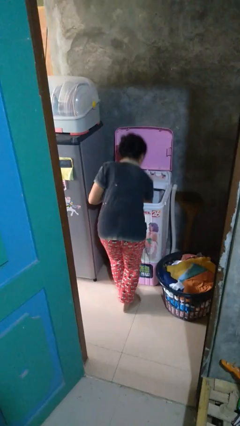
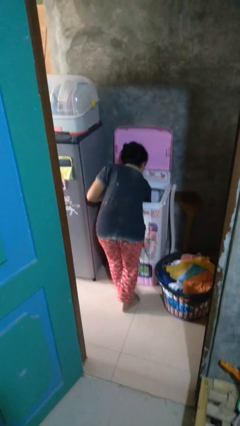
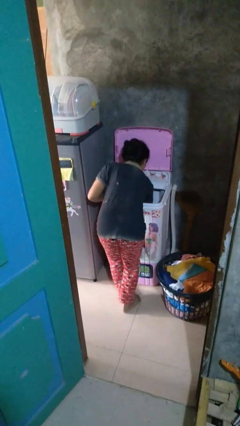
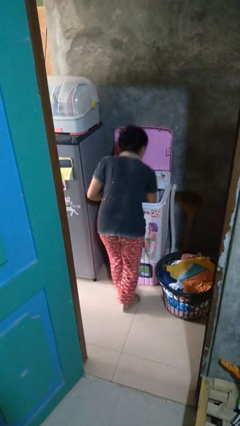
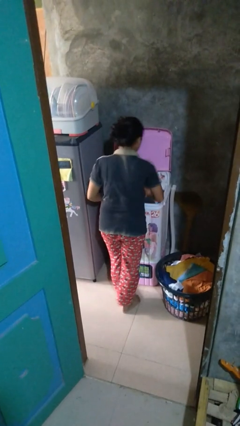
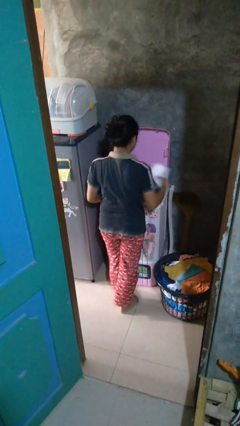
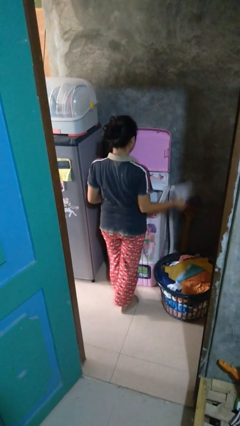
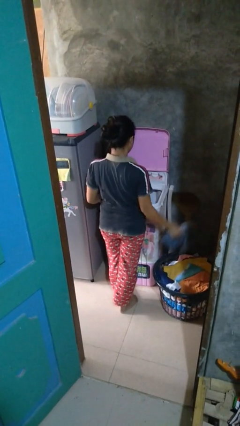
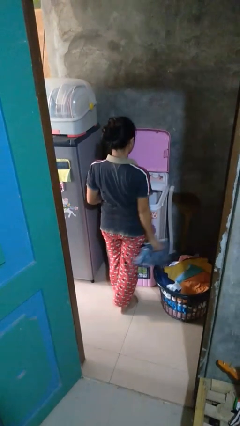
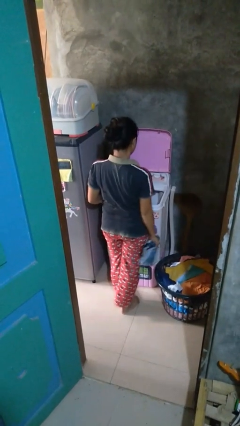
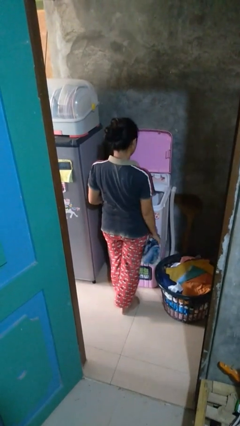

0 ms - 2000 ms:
person unloads clotheswasher

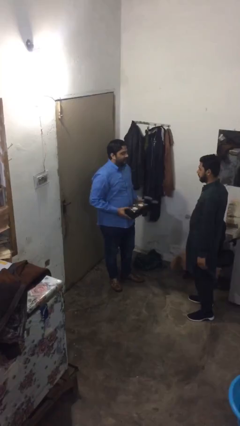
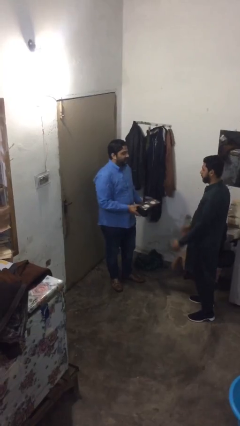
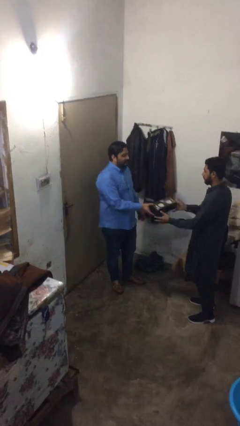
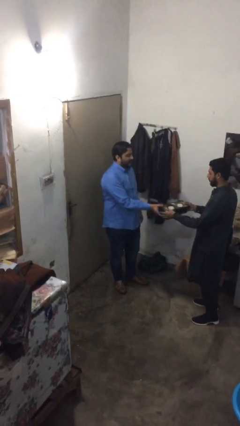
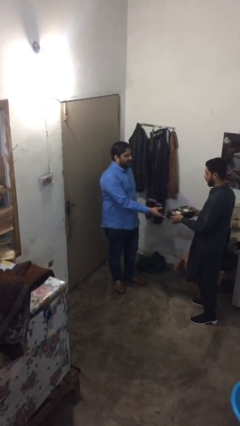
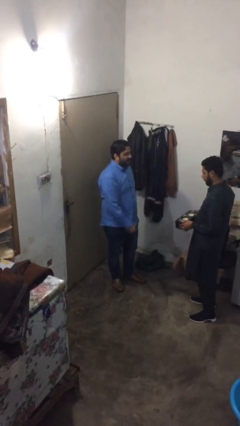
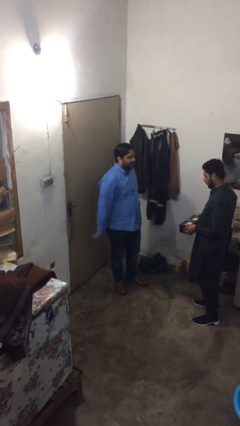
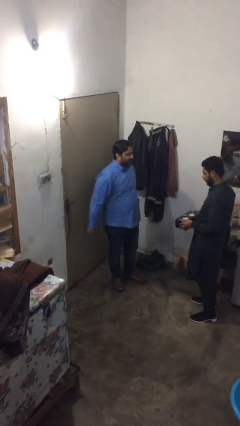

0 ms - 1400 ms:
person transfers object to person

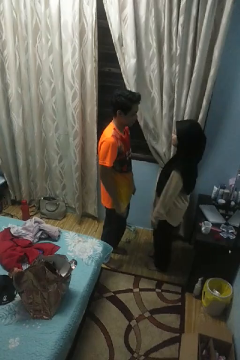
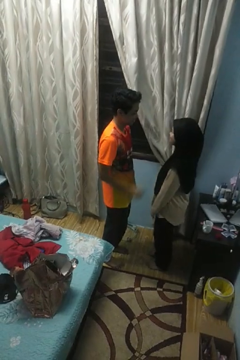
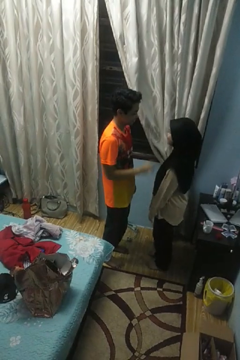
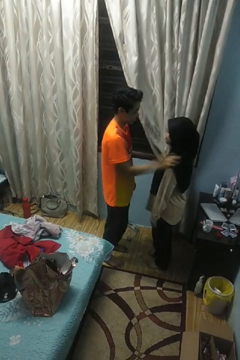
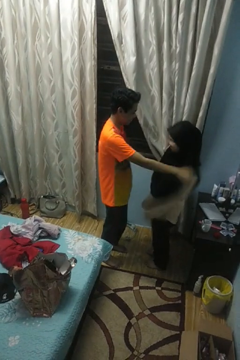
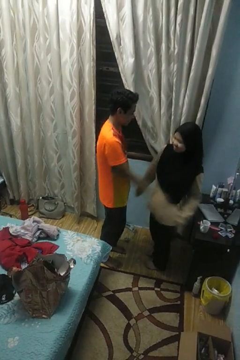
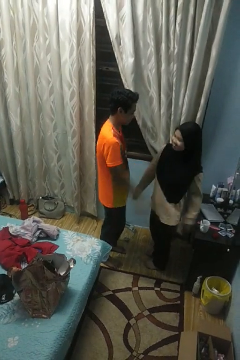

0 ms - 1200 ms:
person shoves person

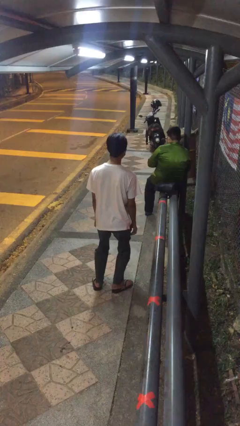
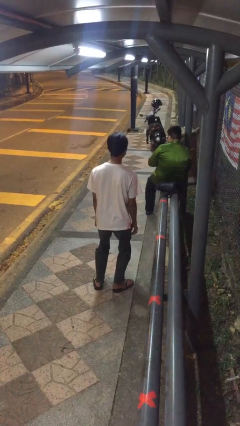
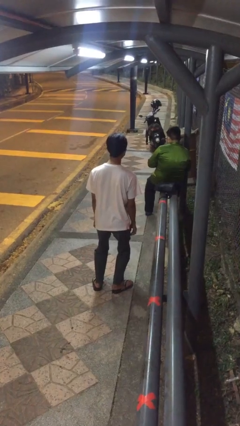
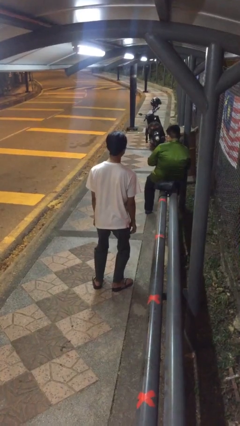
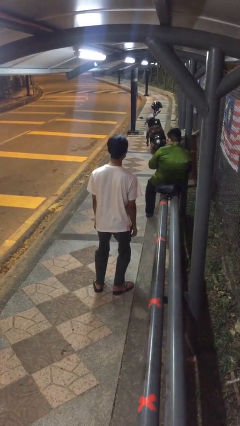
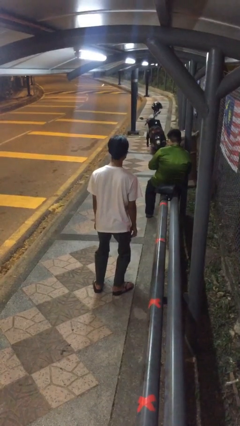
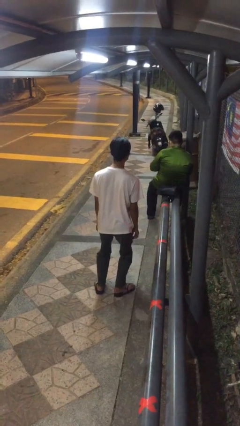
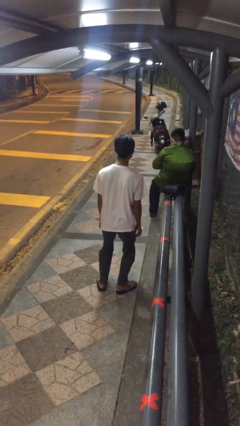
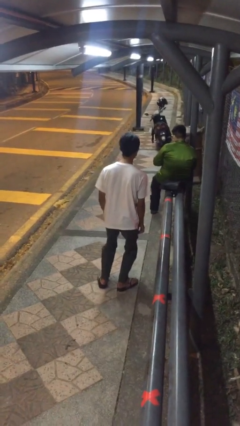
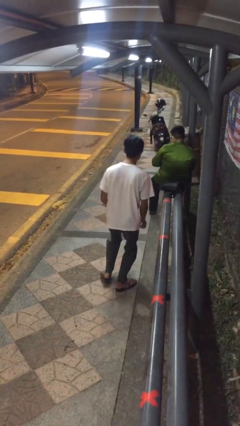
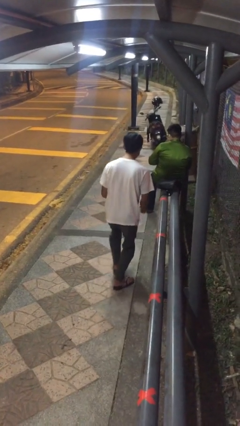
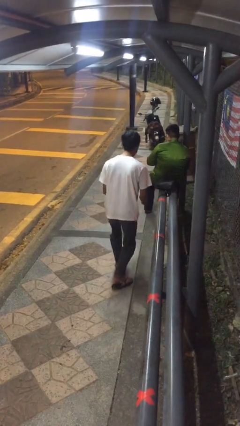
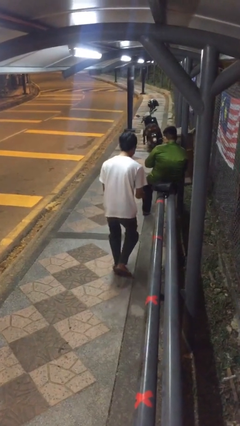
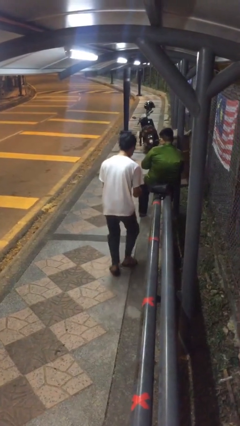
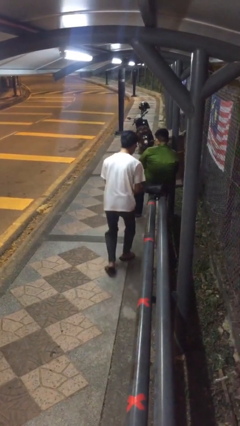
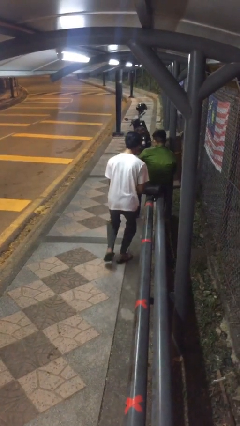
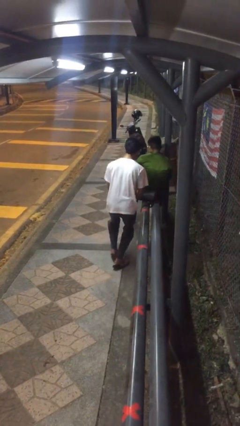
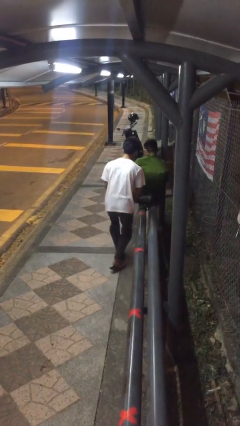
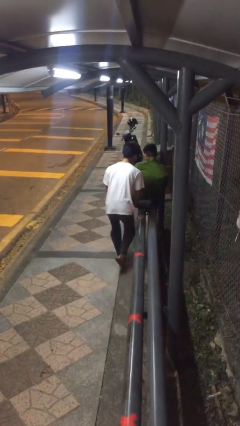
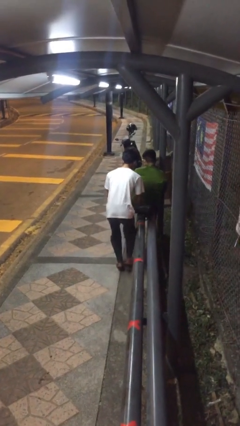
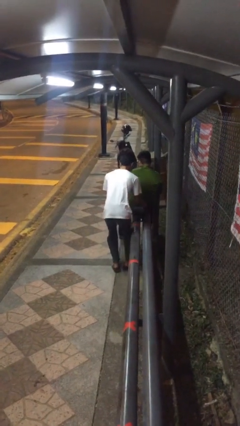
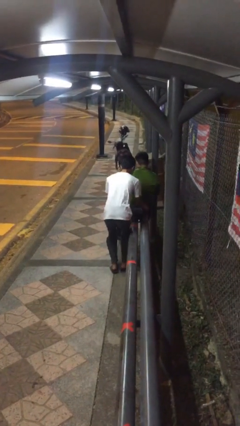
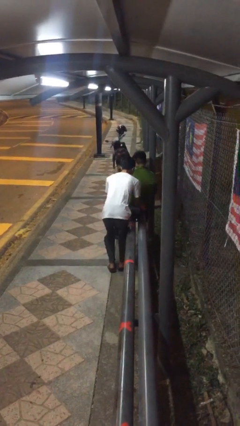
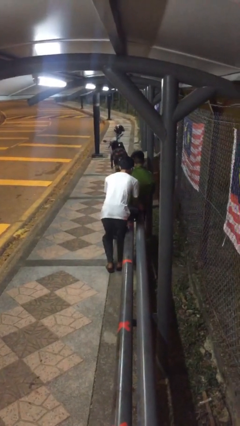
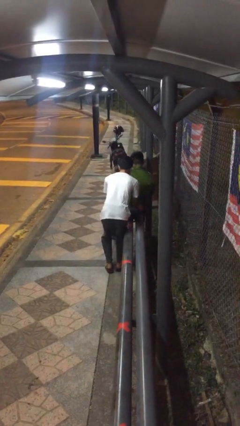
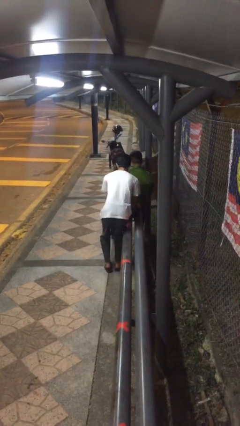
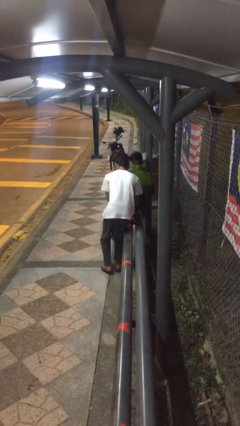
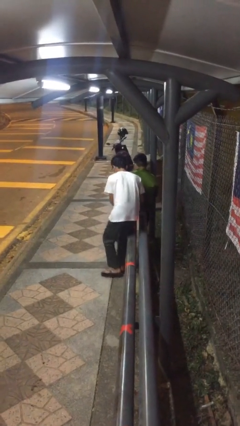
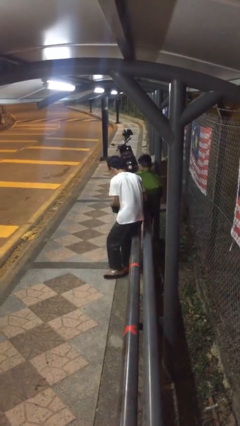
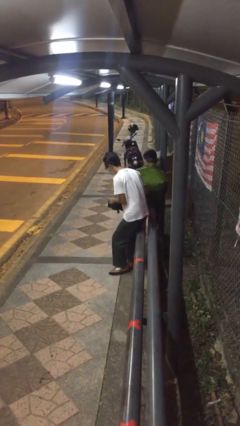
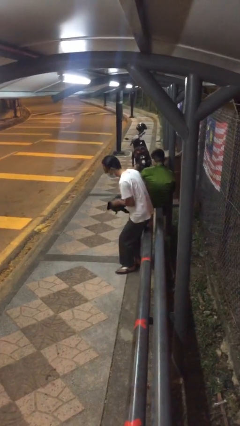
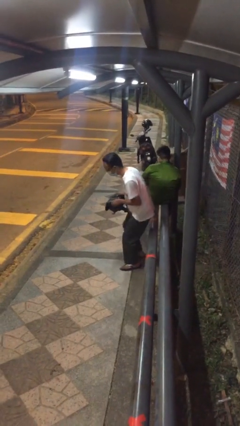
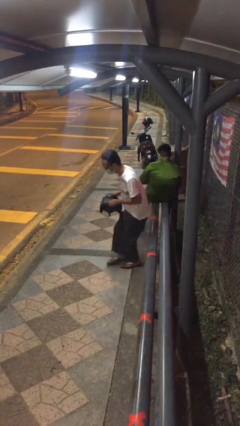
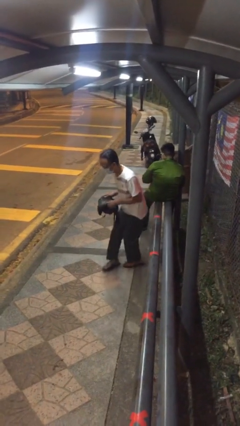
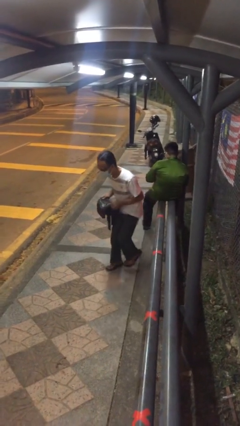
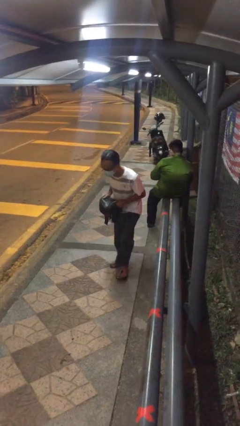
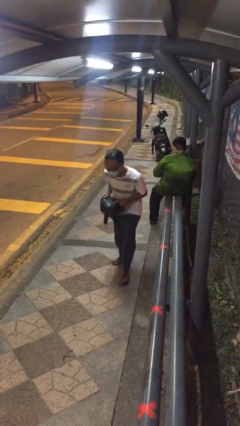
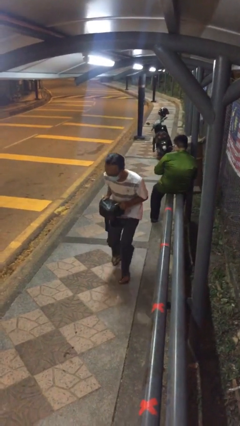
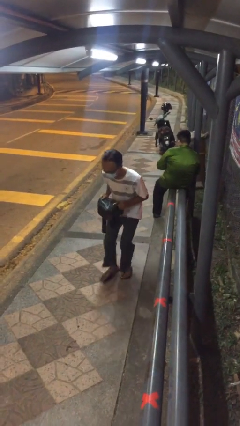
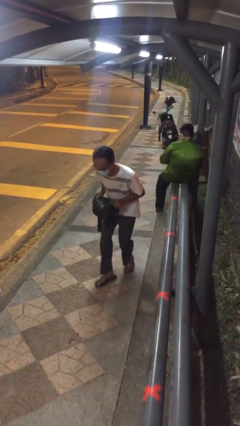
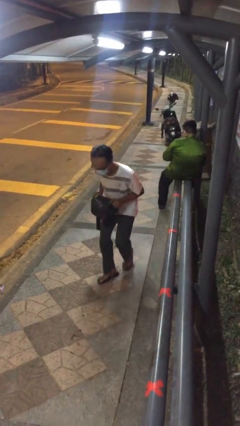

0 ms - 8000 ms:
person steals object from person

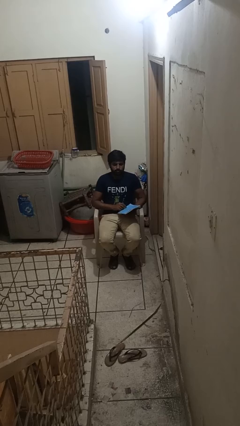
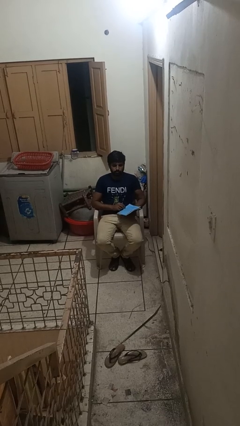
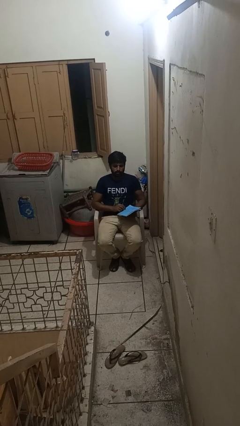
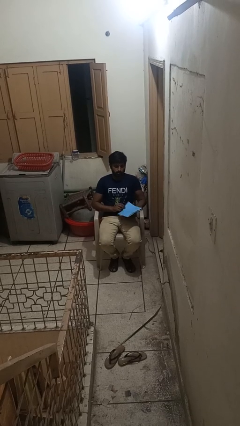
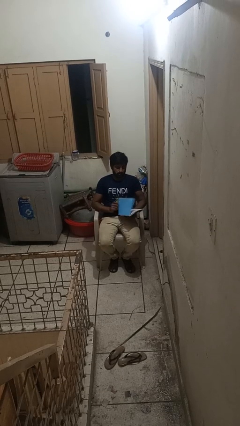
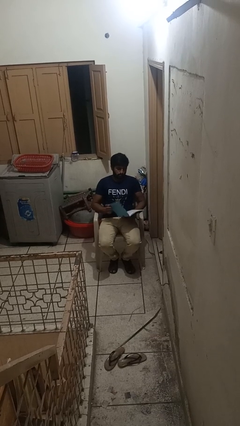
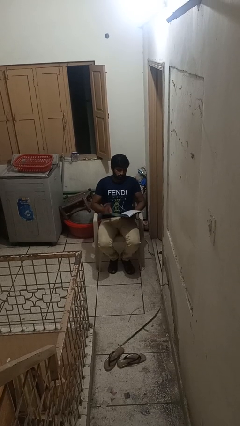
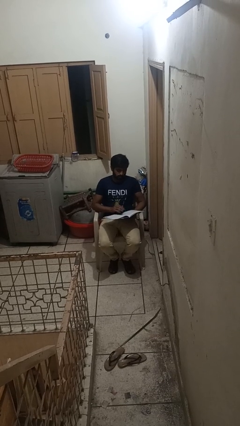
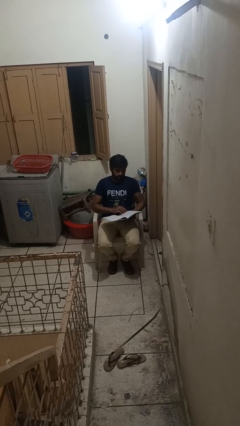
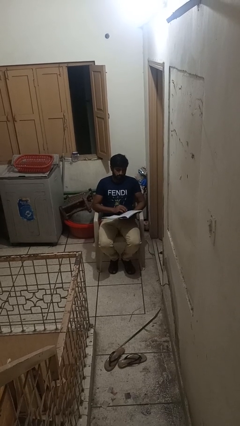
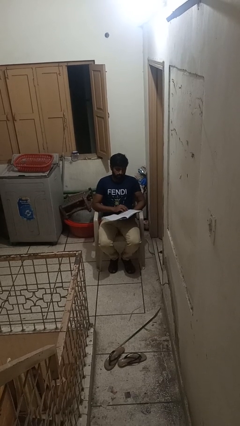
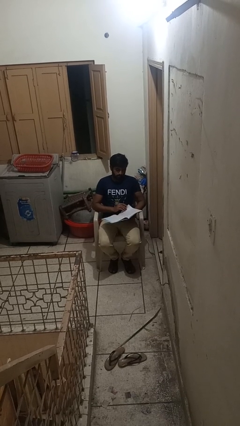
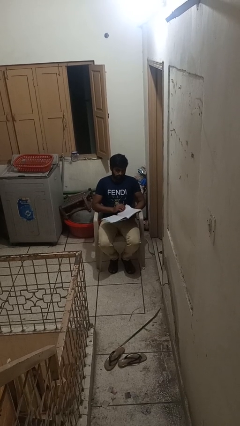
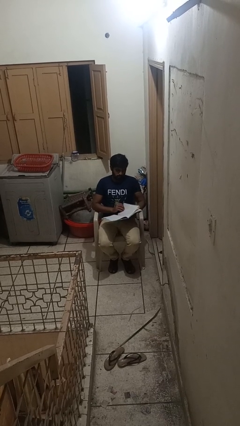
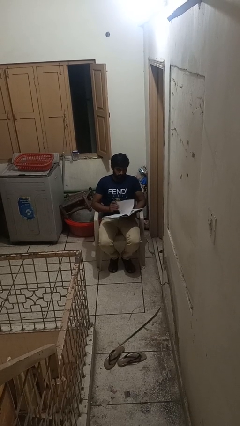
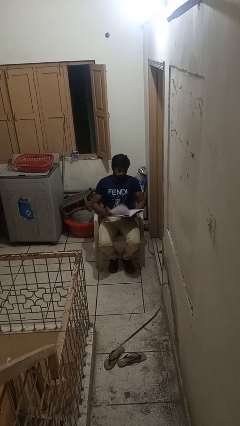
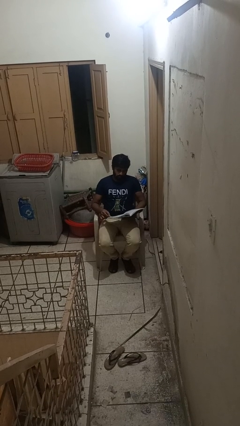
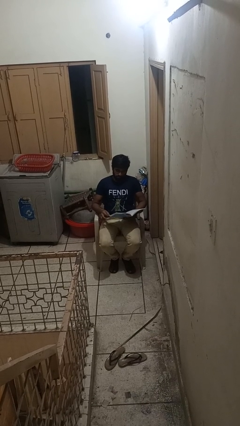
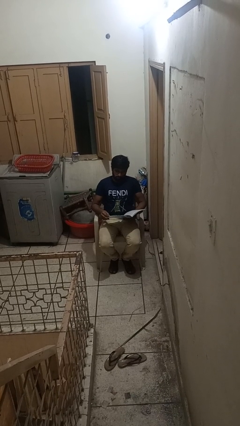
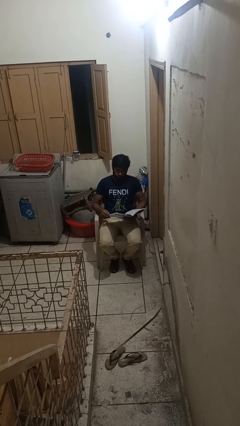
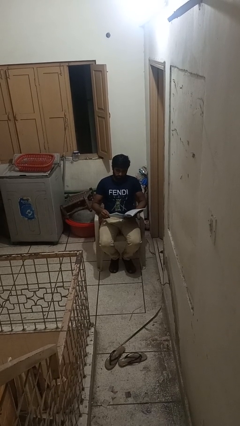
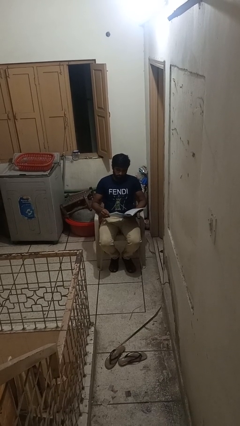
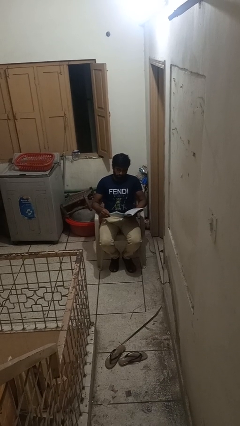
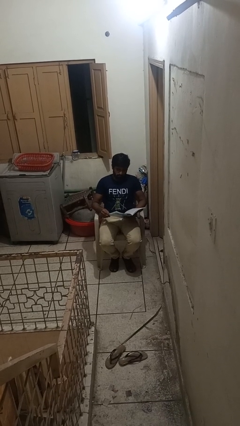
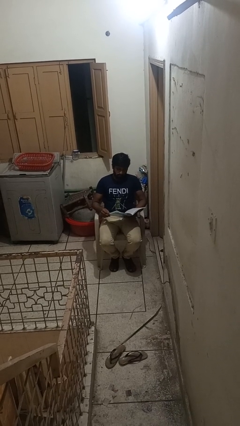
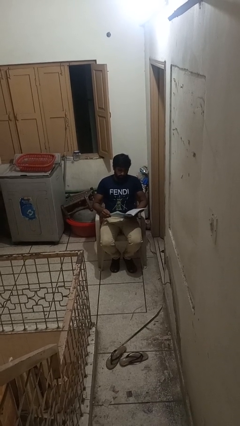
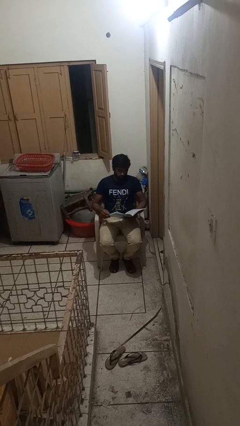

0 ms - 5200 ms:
person reads book

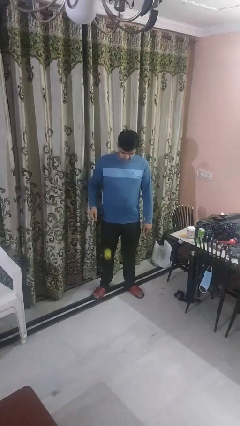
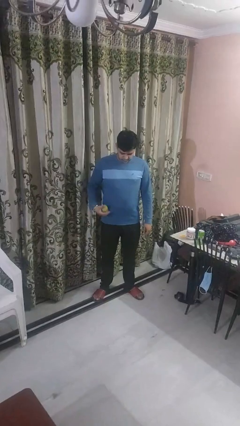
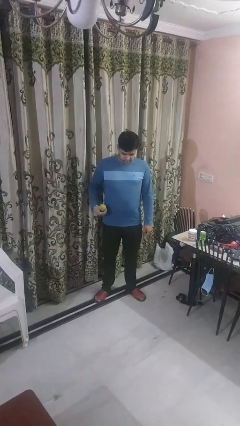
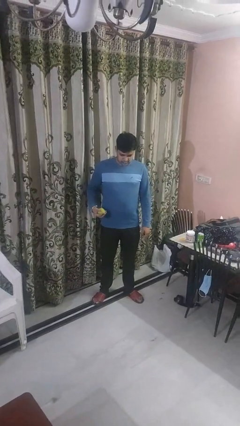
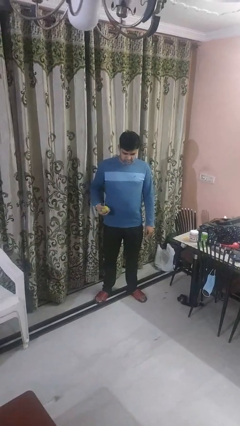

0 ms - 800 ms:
person bounces ball on floor
